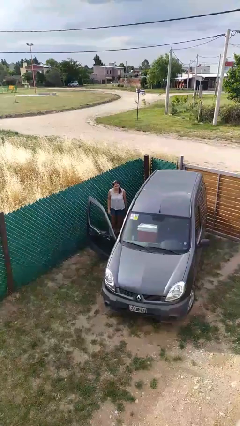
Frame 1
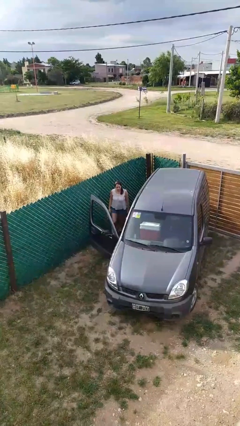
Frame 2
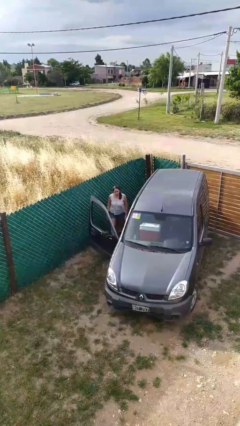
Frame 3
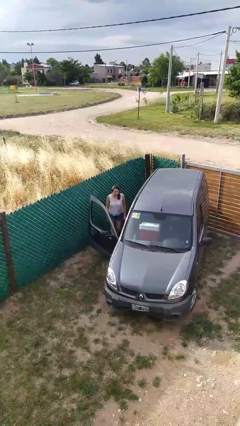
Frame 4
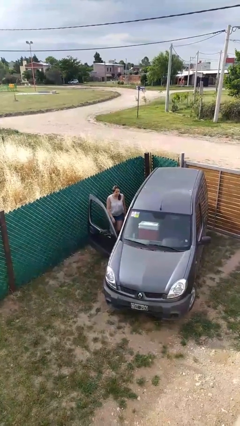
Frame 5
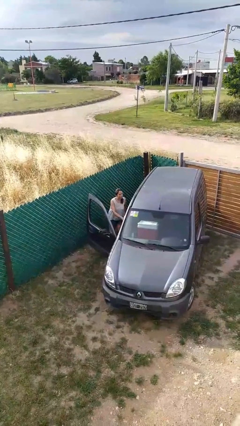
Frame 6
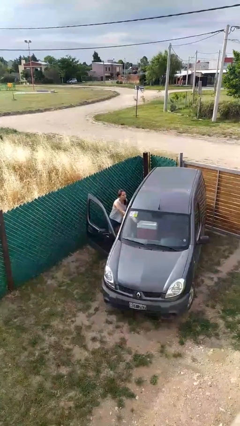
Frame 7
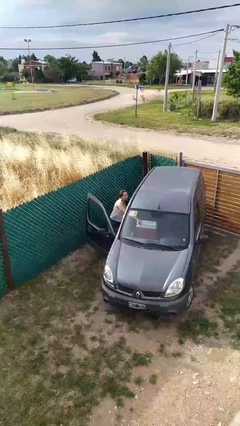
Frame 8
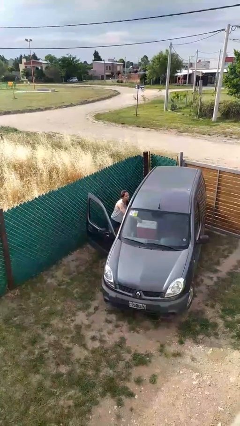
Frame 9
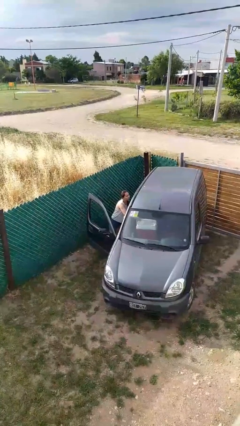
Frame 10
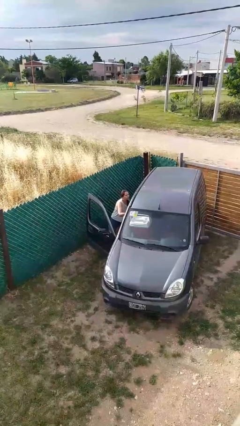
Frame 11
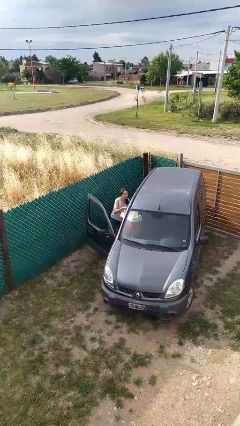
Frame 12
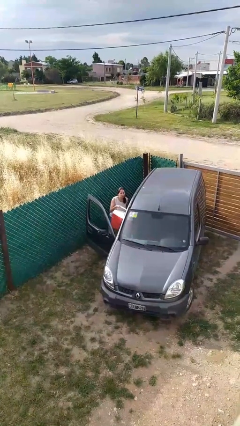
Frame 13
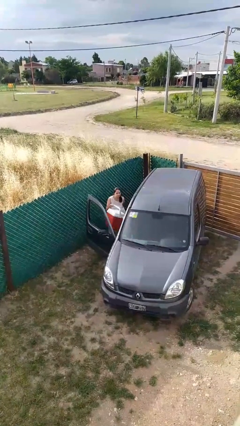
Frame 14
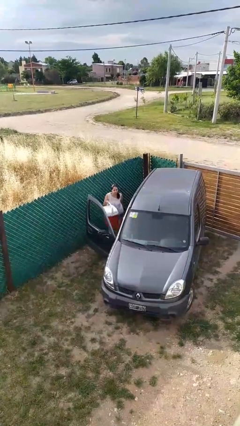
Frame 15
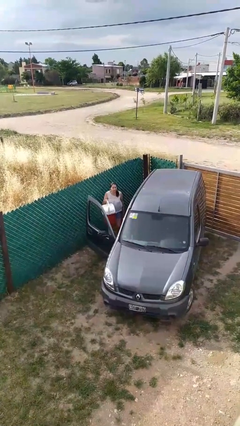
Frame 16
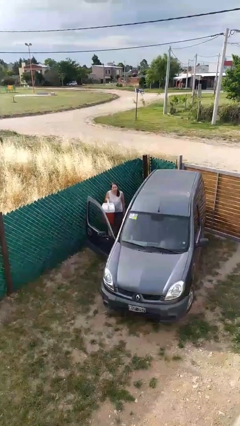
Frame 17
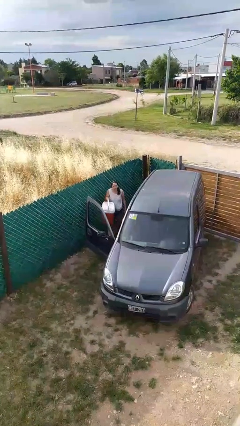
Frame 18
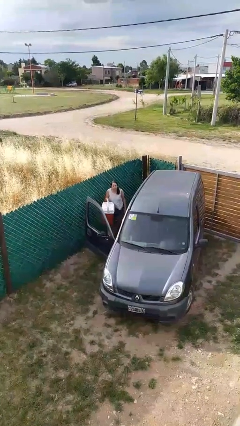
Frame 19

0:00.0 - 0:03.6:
person unloads car

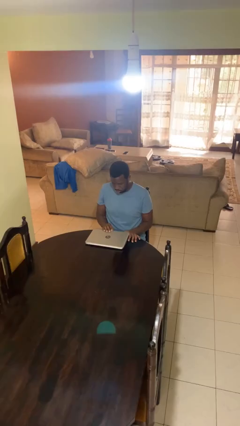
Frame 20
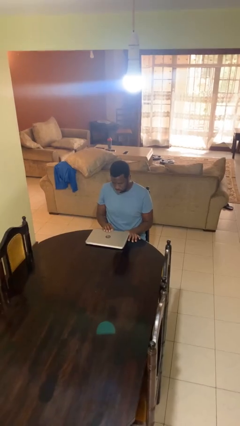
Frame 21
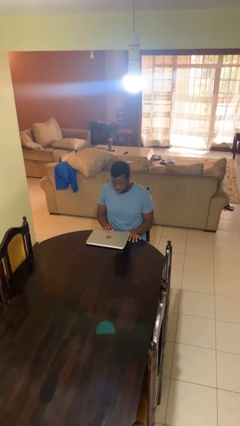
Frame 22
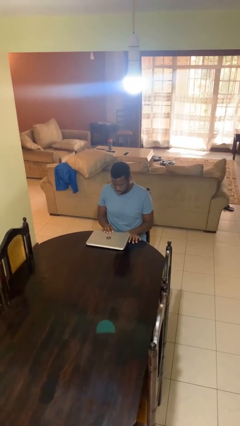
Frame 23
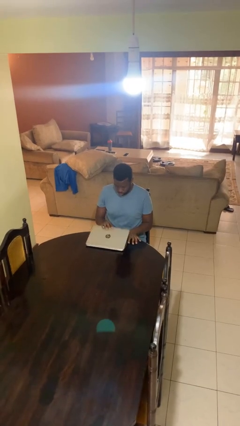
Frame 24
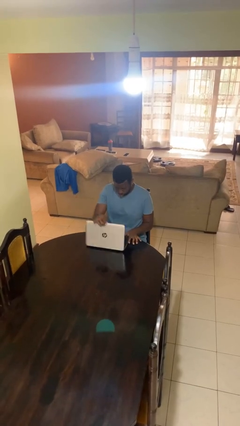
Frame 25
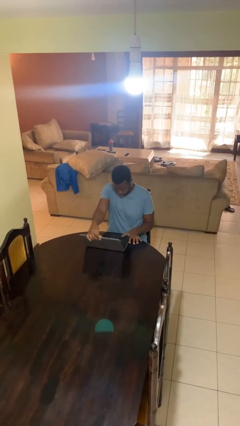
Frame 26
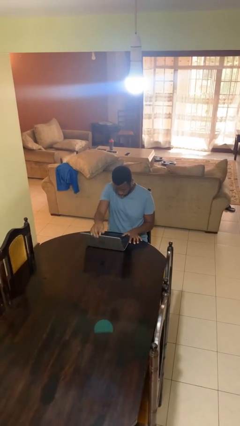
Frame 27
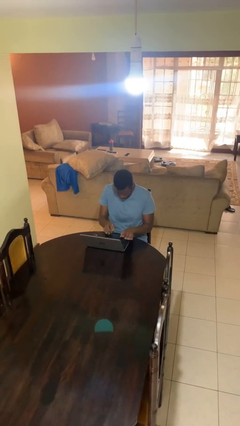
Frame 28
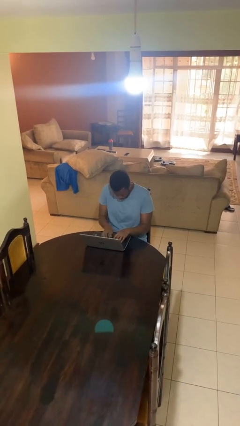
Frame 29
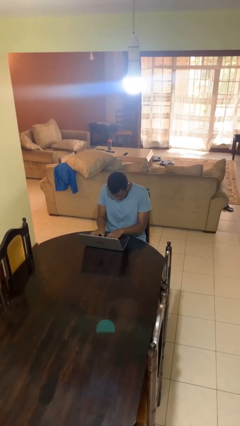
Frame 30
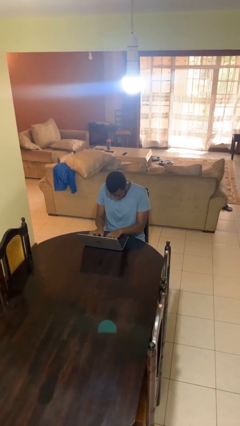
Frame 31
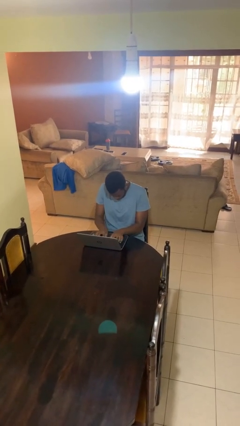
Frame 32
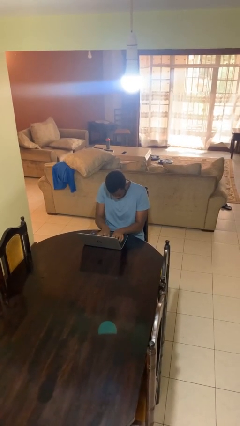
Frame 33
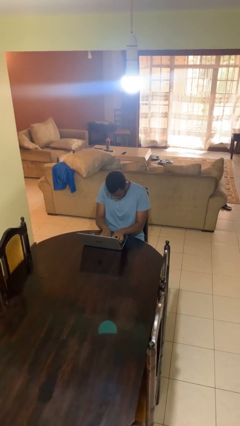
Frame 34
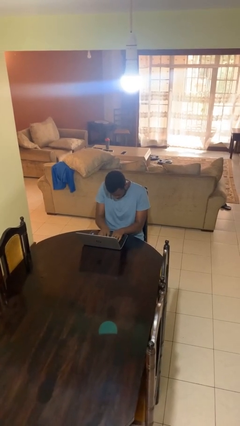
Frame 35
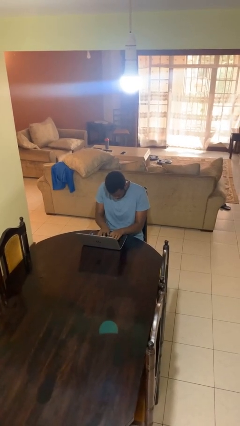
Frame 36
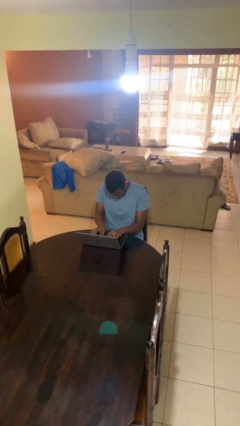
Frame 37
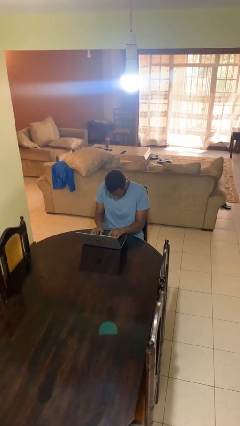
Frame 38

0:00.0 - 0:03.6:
person interacts with laptop

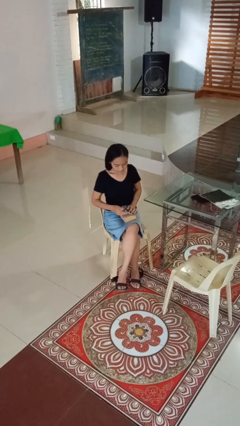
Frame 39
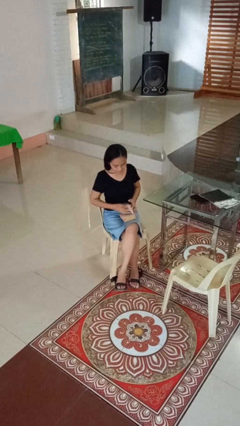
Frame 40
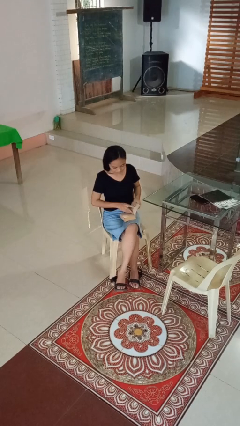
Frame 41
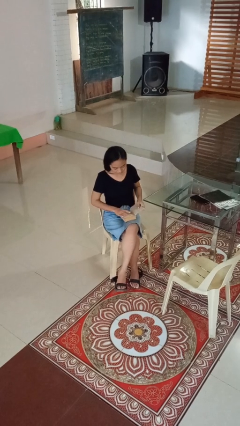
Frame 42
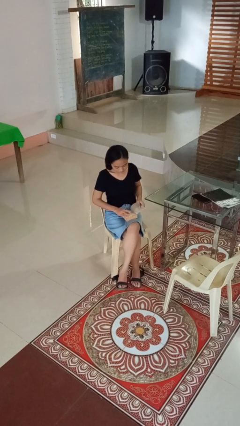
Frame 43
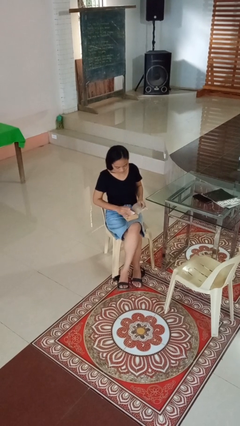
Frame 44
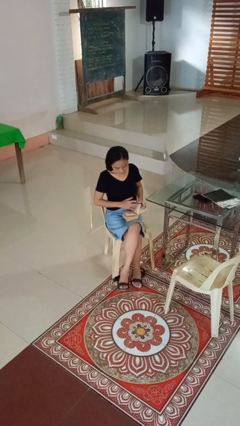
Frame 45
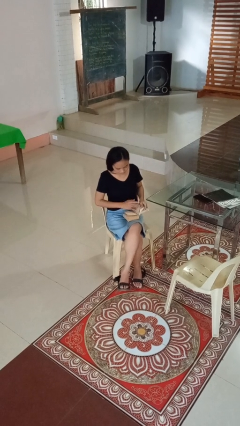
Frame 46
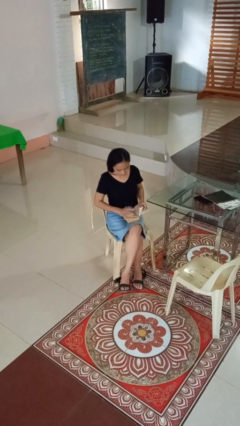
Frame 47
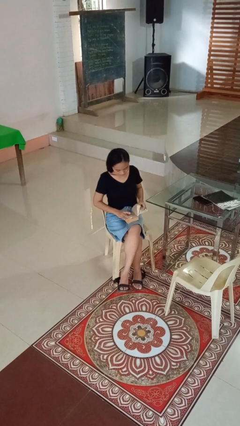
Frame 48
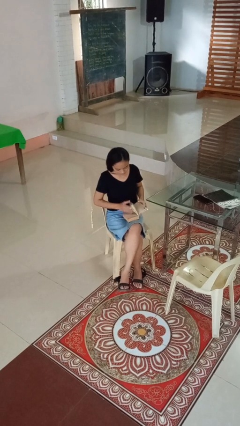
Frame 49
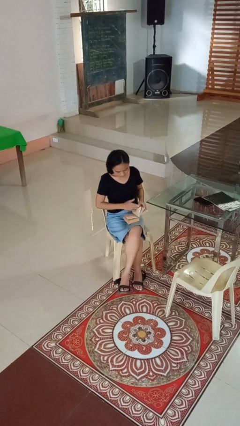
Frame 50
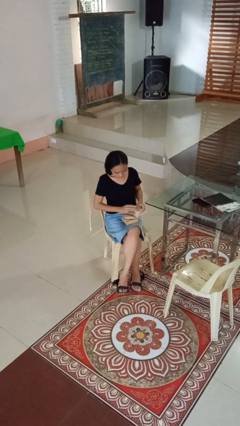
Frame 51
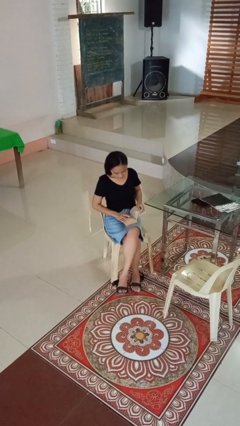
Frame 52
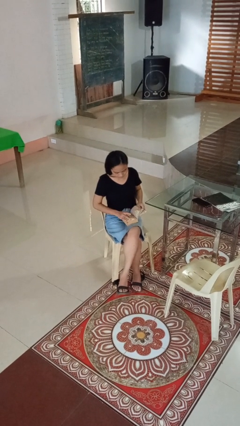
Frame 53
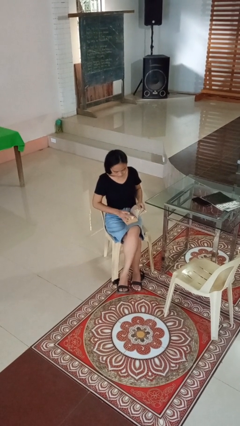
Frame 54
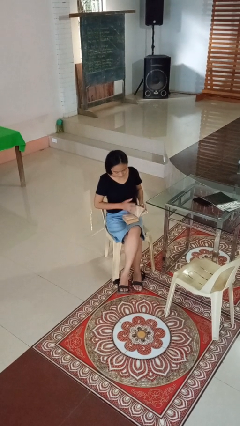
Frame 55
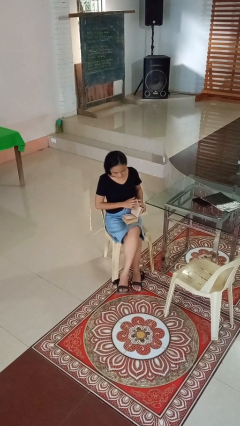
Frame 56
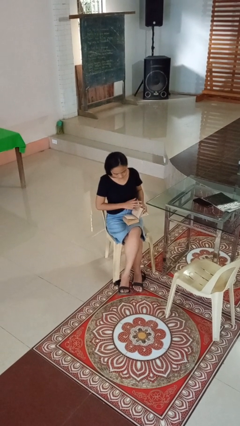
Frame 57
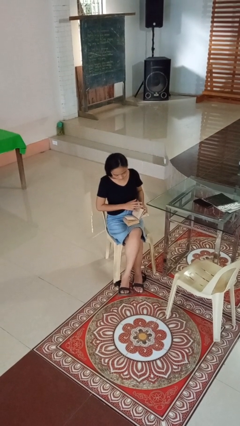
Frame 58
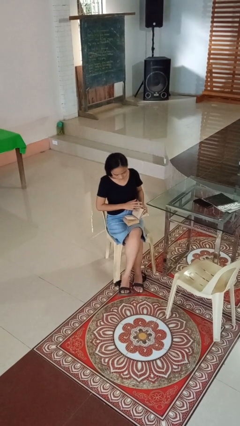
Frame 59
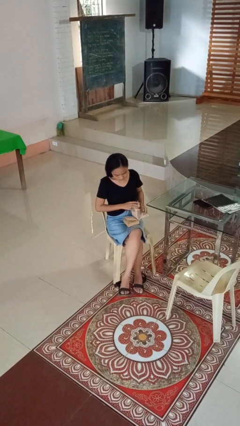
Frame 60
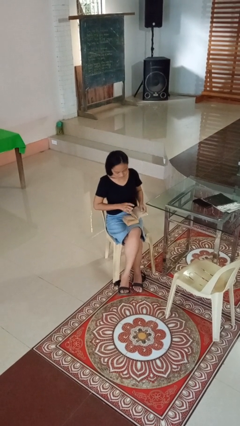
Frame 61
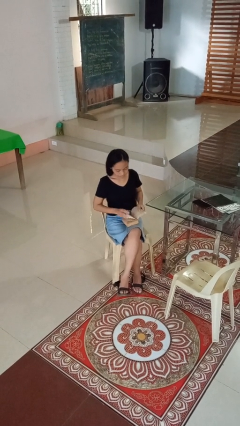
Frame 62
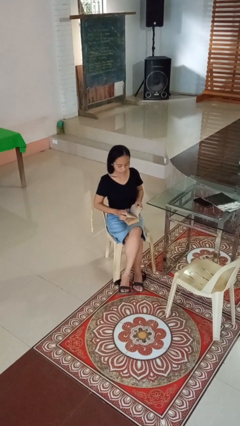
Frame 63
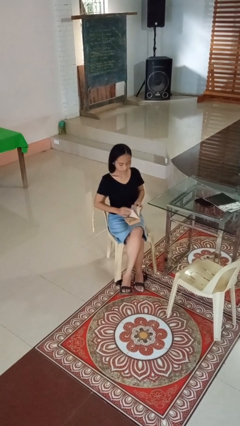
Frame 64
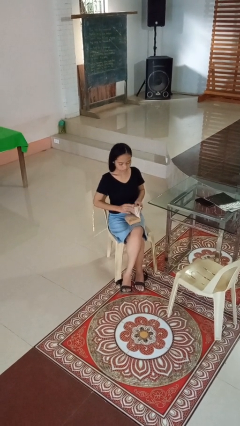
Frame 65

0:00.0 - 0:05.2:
person reads book

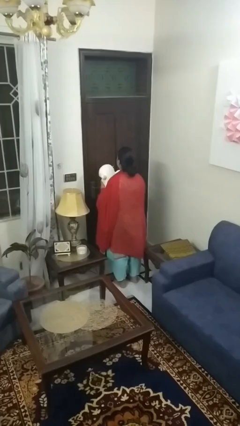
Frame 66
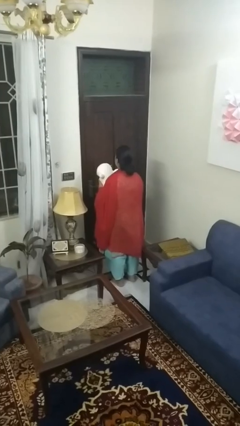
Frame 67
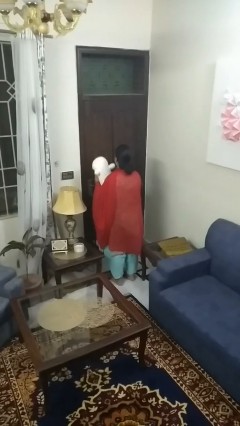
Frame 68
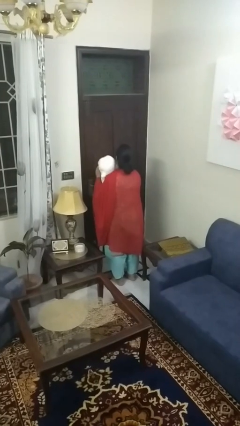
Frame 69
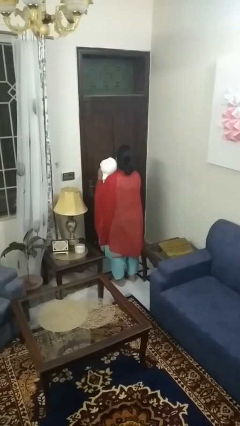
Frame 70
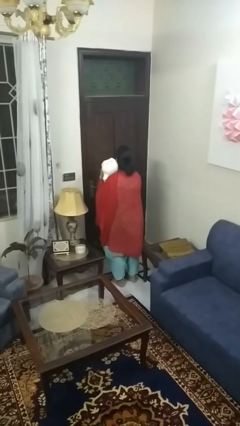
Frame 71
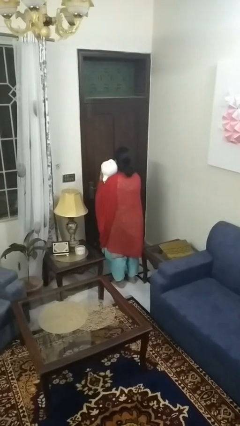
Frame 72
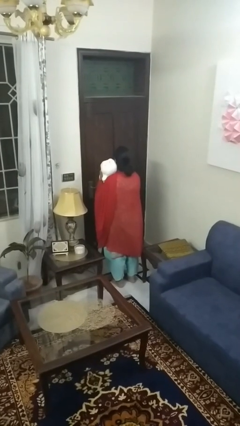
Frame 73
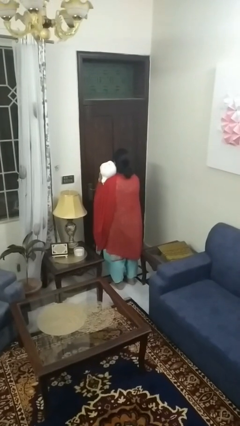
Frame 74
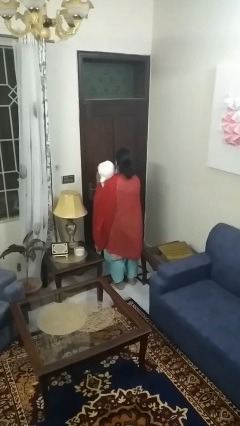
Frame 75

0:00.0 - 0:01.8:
person hugs stuffed animal

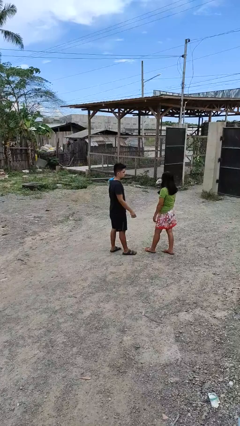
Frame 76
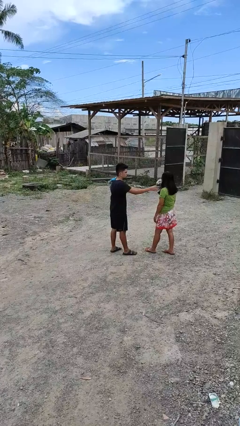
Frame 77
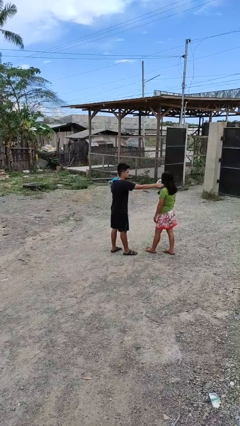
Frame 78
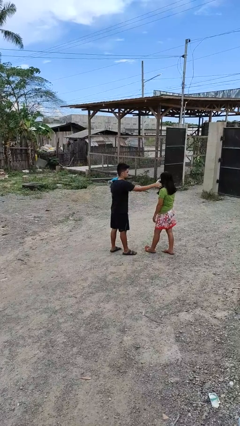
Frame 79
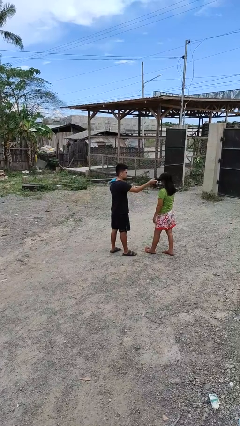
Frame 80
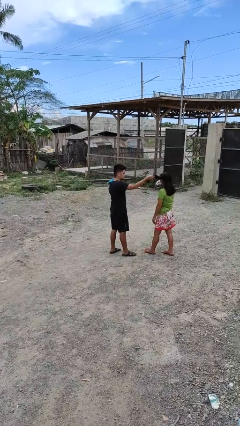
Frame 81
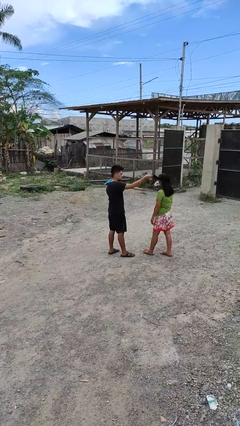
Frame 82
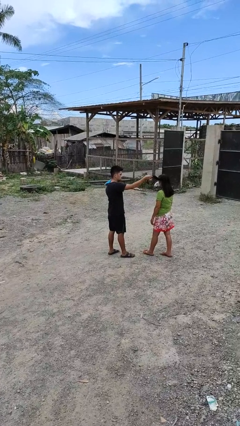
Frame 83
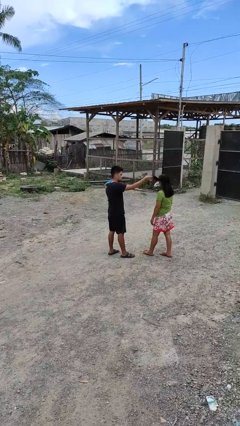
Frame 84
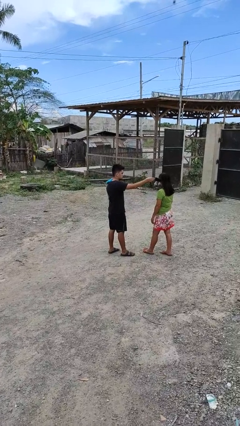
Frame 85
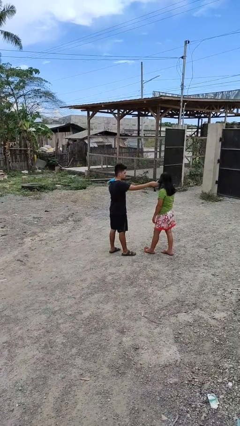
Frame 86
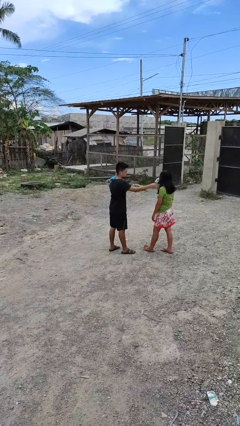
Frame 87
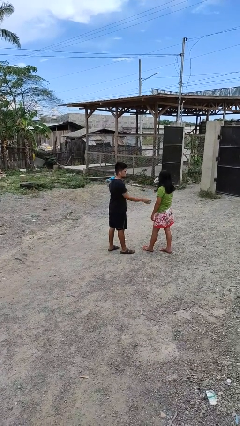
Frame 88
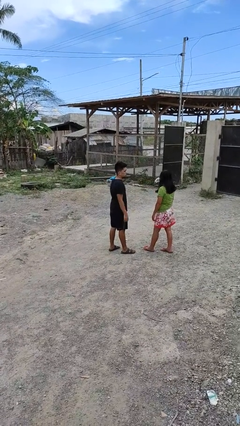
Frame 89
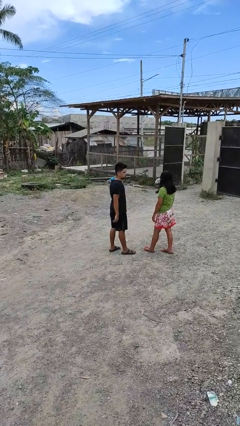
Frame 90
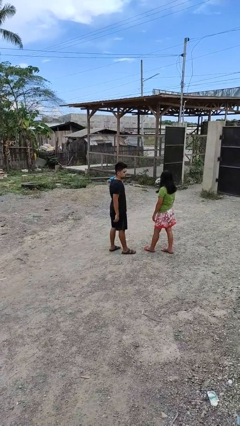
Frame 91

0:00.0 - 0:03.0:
person grabs person by hair
